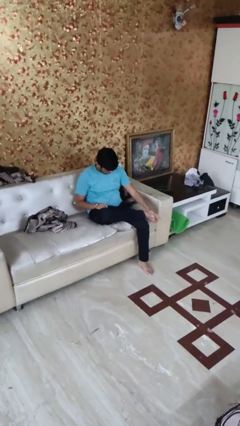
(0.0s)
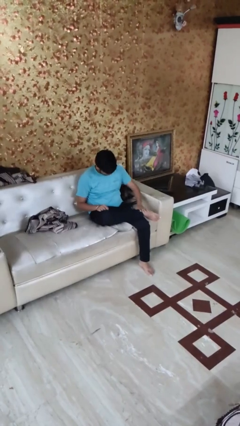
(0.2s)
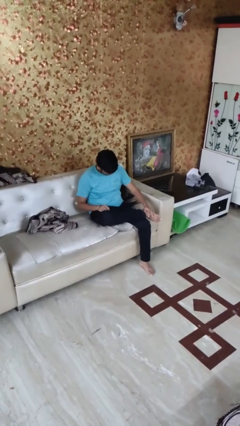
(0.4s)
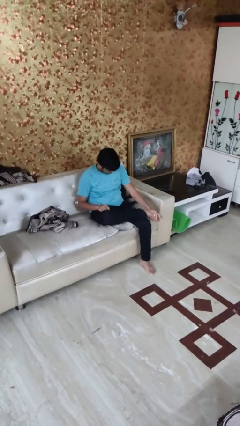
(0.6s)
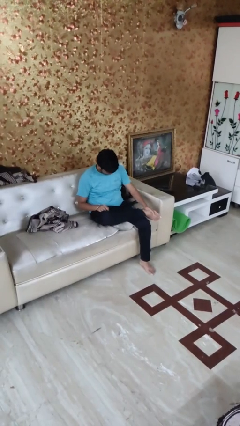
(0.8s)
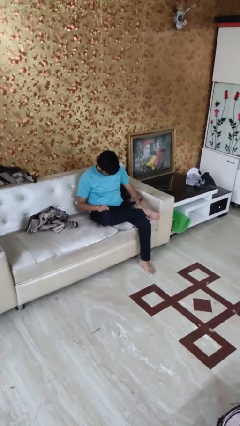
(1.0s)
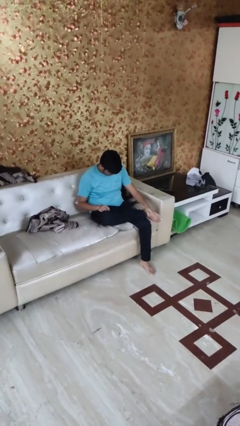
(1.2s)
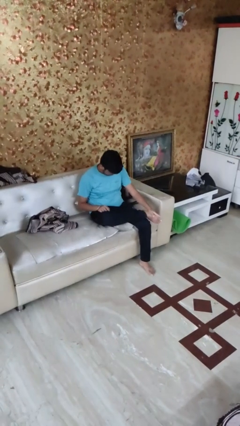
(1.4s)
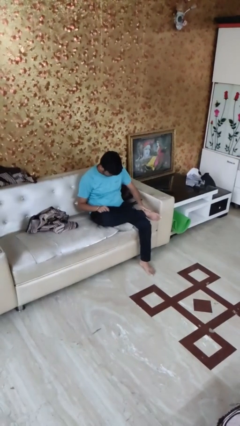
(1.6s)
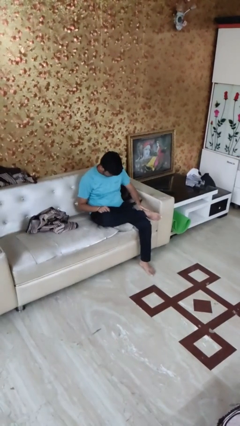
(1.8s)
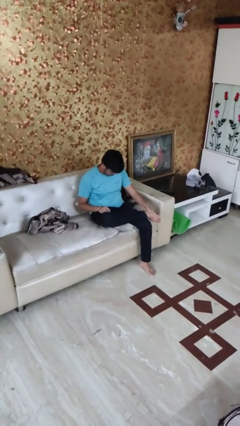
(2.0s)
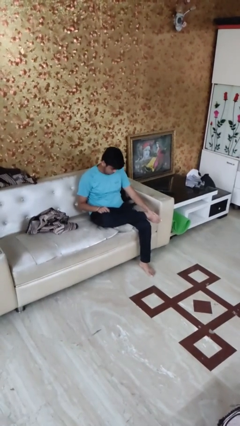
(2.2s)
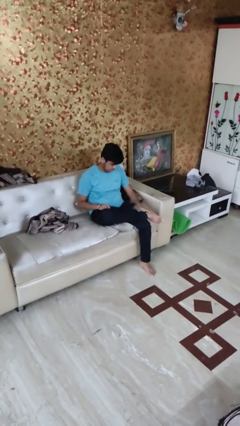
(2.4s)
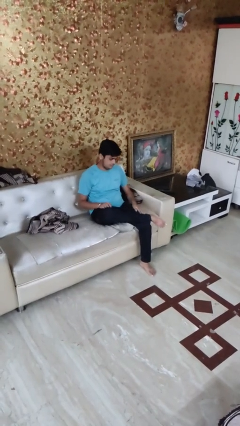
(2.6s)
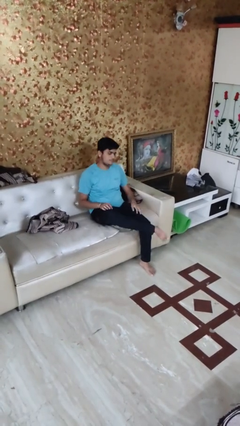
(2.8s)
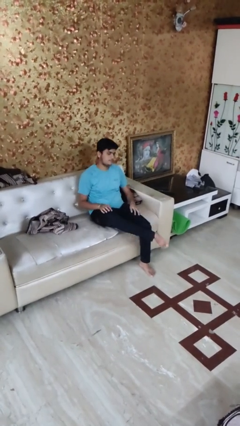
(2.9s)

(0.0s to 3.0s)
person rubs foot

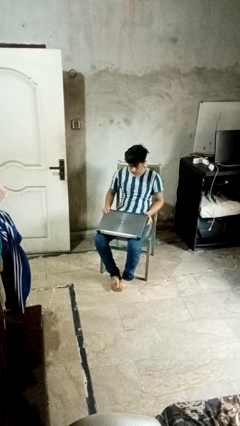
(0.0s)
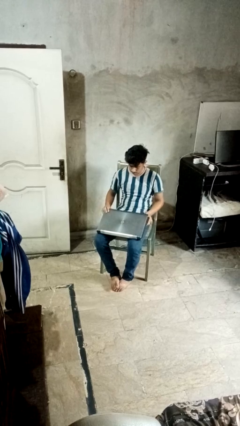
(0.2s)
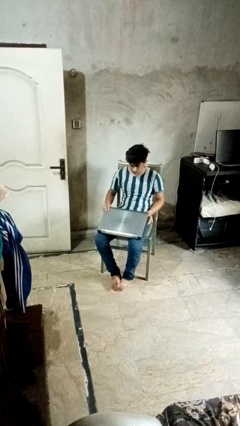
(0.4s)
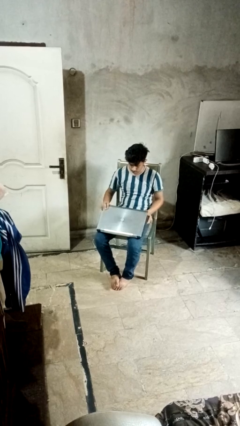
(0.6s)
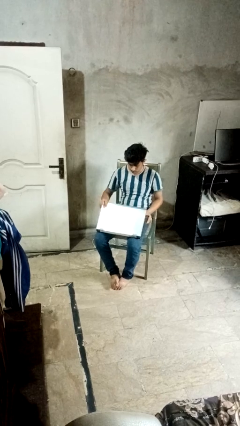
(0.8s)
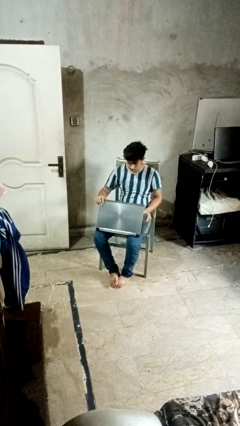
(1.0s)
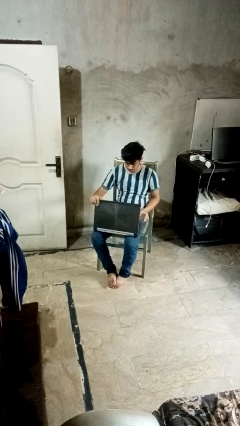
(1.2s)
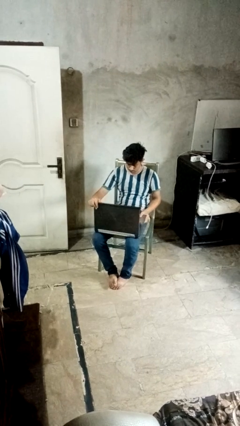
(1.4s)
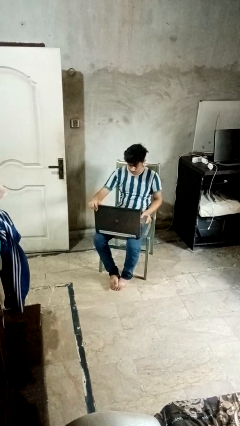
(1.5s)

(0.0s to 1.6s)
person opens laptop

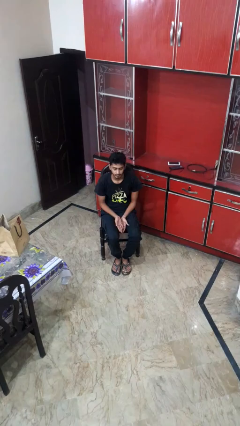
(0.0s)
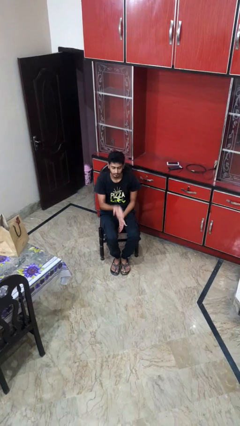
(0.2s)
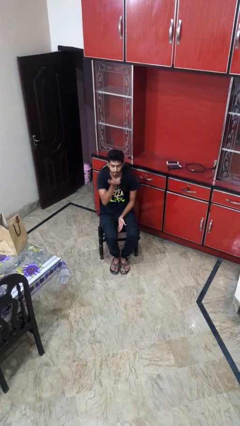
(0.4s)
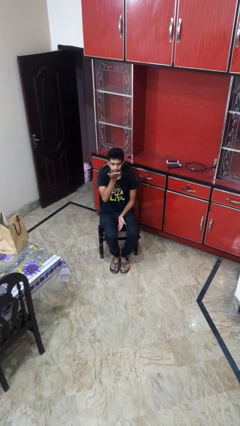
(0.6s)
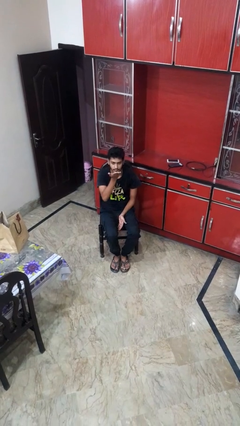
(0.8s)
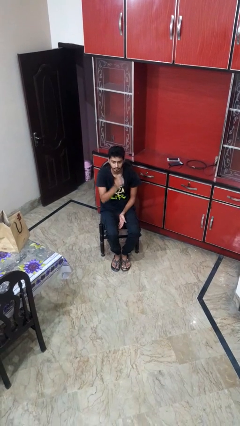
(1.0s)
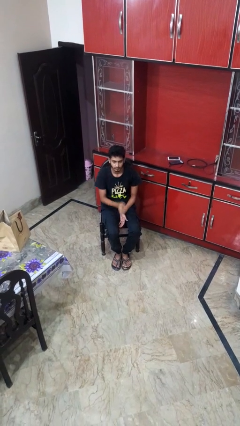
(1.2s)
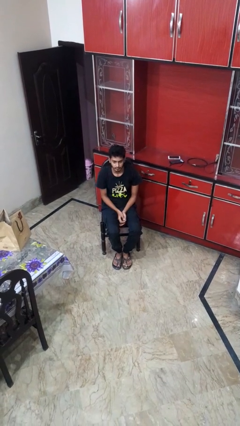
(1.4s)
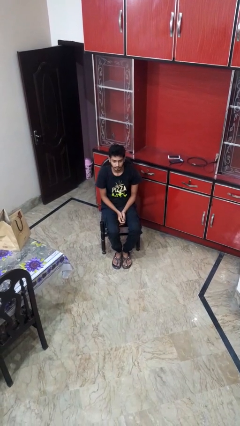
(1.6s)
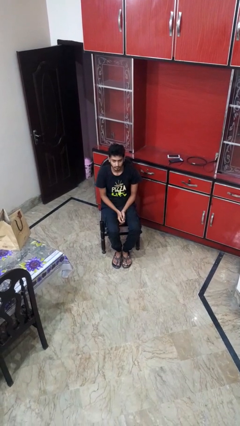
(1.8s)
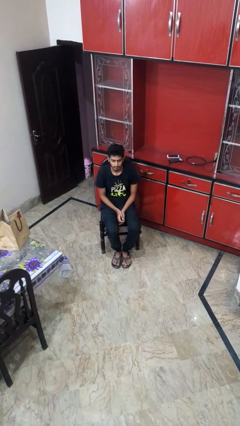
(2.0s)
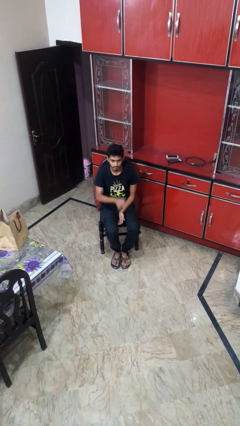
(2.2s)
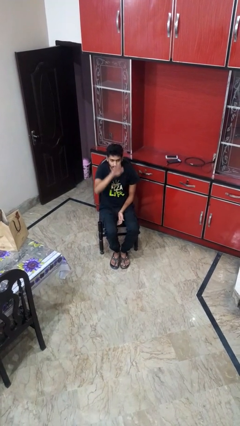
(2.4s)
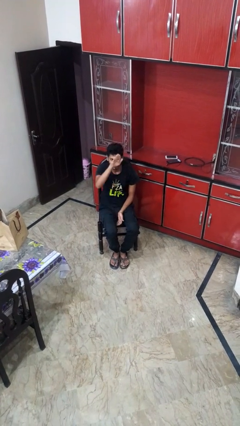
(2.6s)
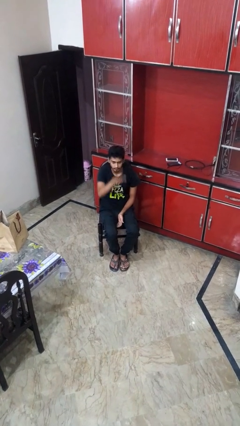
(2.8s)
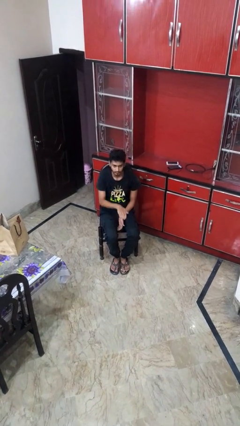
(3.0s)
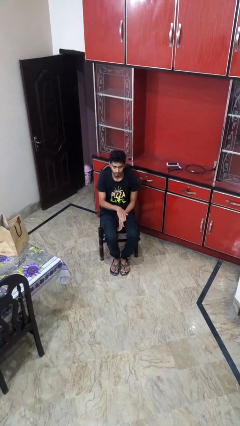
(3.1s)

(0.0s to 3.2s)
person gestures swipe up

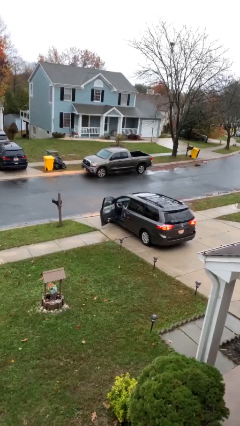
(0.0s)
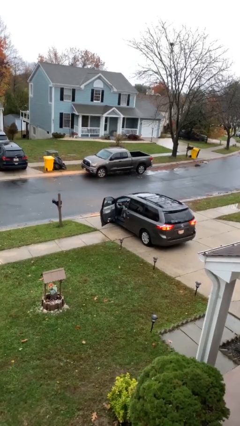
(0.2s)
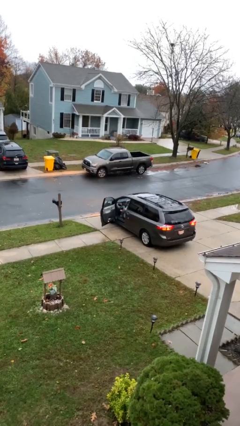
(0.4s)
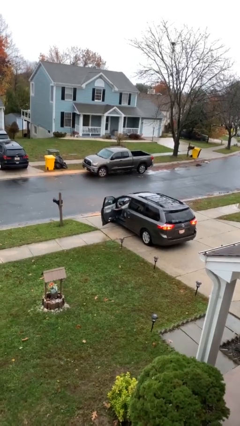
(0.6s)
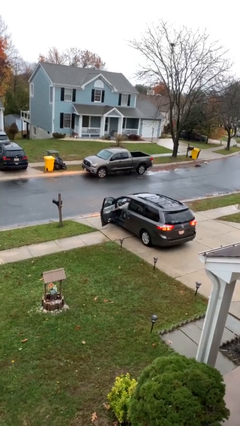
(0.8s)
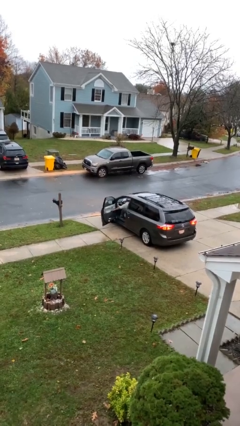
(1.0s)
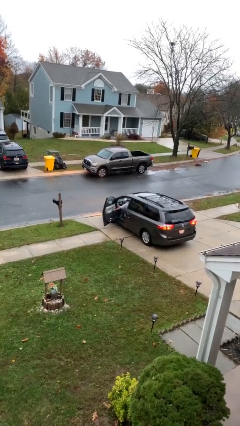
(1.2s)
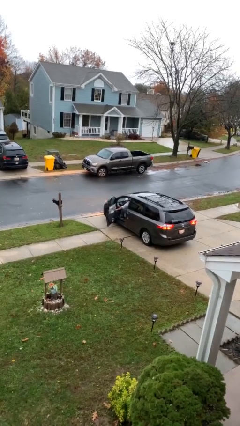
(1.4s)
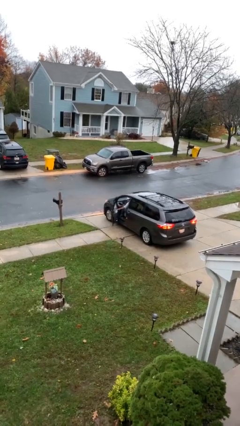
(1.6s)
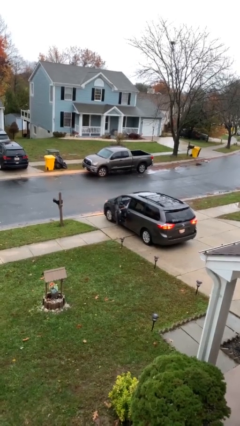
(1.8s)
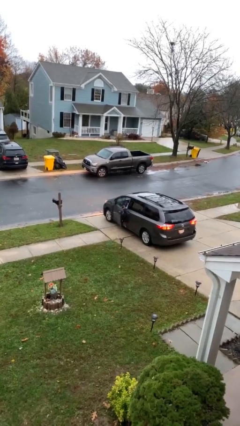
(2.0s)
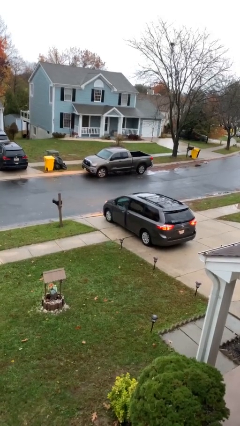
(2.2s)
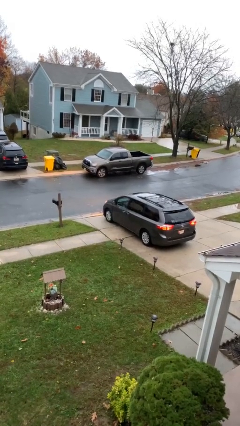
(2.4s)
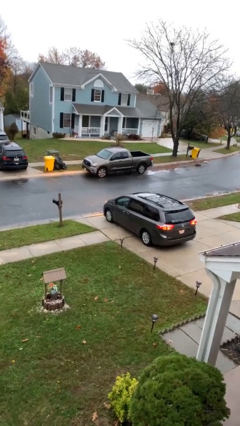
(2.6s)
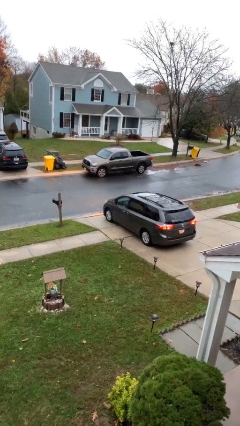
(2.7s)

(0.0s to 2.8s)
person closes car door

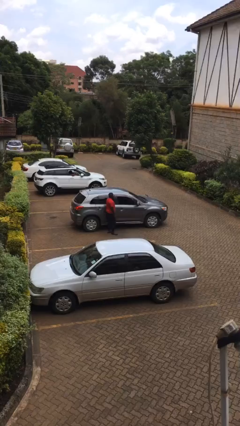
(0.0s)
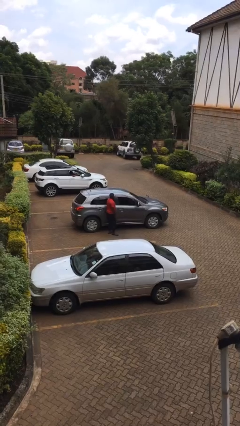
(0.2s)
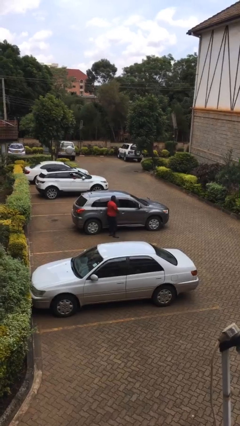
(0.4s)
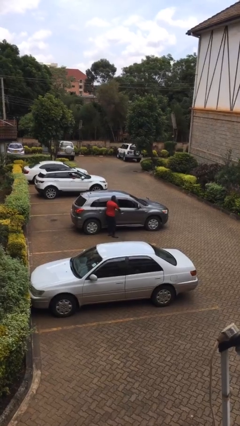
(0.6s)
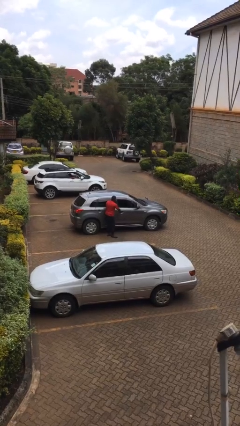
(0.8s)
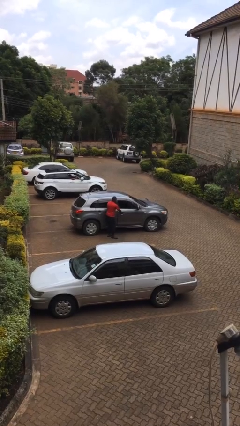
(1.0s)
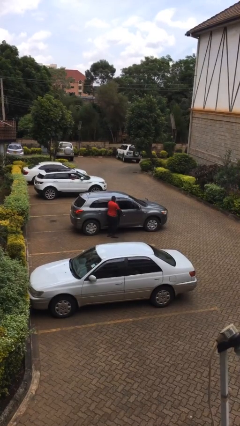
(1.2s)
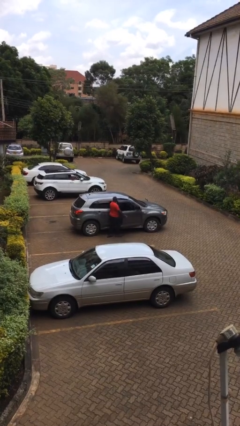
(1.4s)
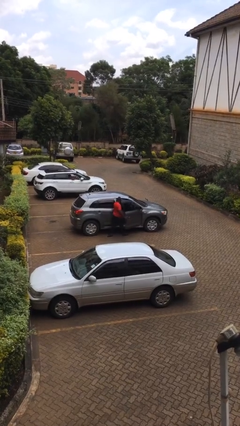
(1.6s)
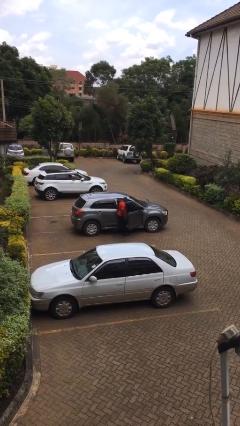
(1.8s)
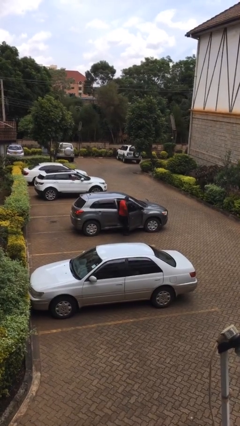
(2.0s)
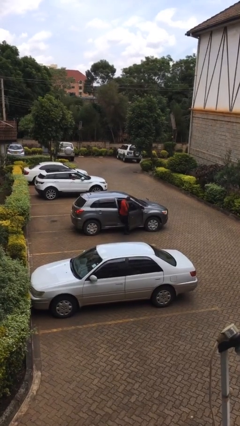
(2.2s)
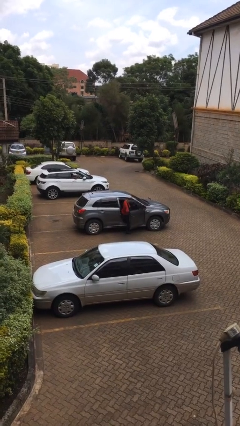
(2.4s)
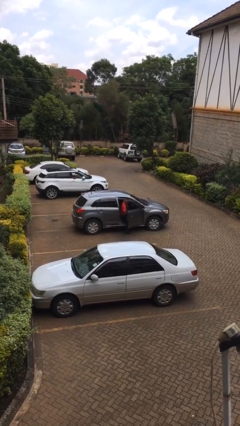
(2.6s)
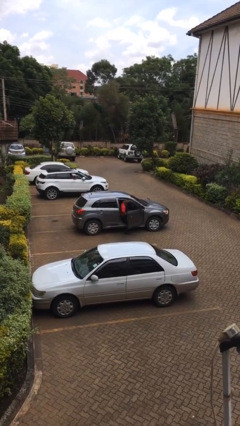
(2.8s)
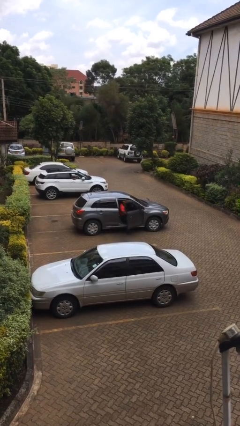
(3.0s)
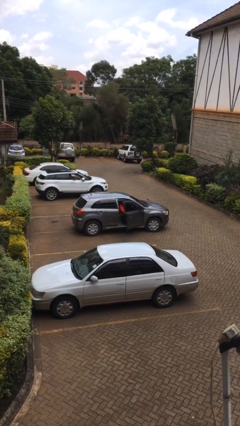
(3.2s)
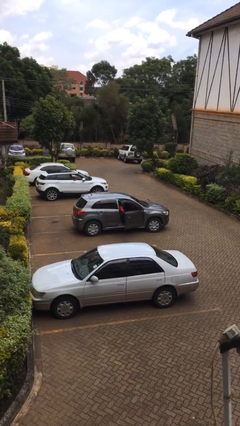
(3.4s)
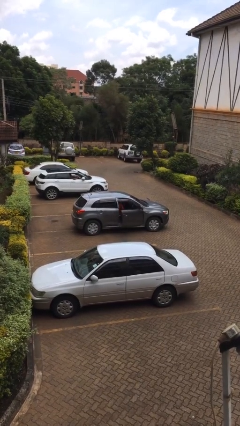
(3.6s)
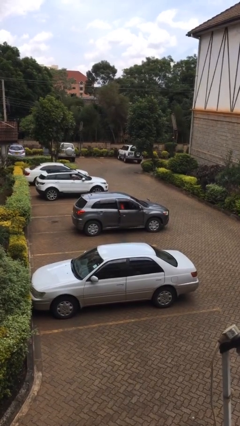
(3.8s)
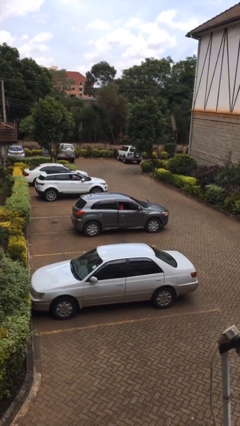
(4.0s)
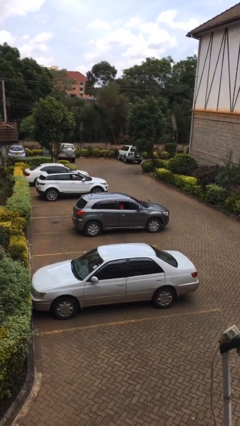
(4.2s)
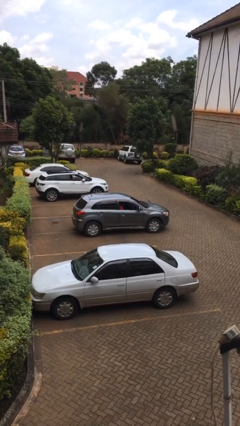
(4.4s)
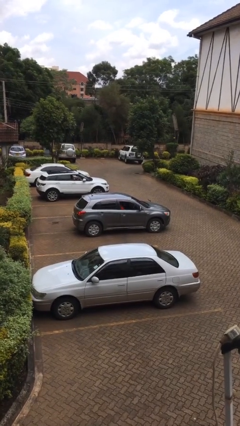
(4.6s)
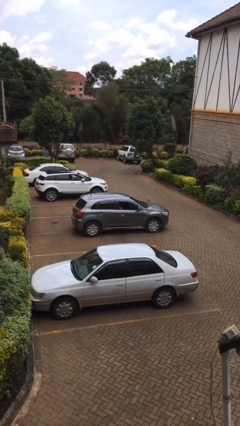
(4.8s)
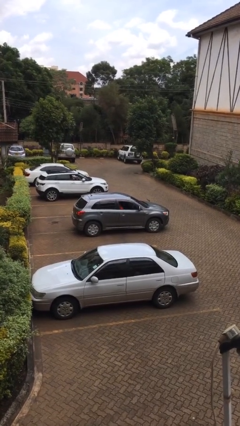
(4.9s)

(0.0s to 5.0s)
car picks up person

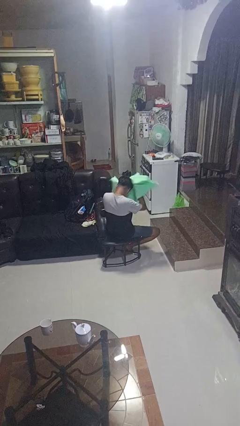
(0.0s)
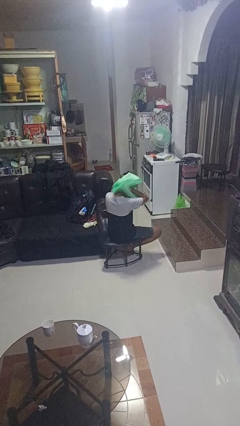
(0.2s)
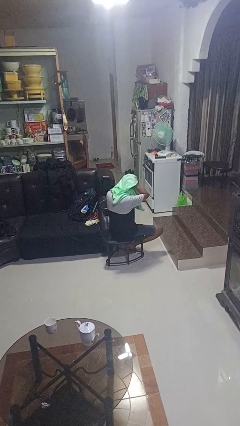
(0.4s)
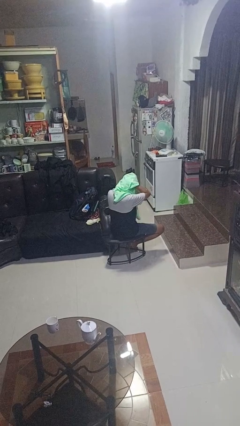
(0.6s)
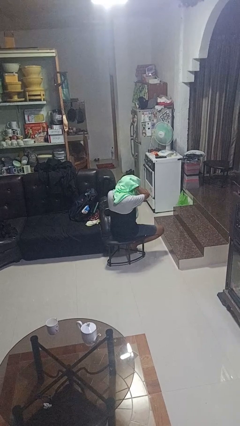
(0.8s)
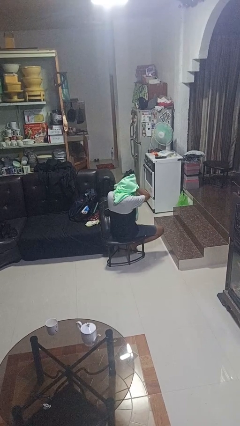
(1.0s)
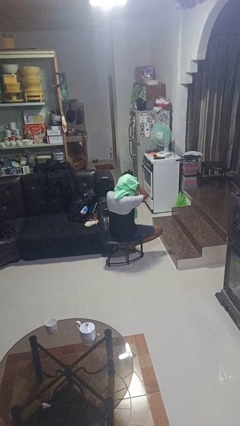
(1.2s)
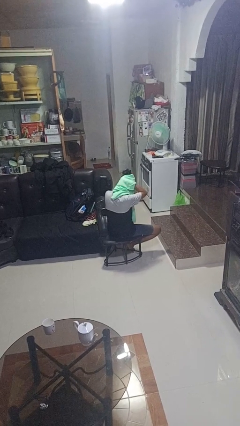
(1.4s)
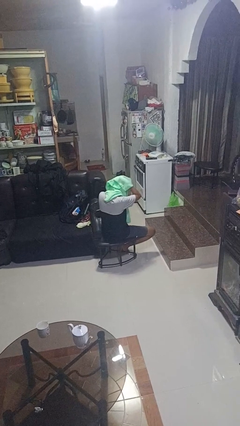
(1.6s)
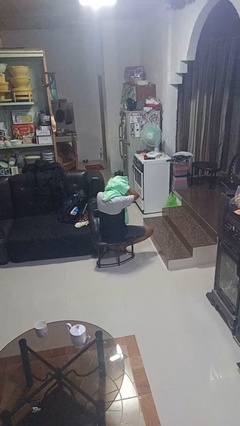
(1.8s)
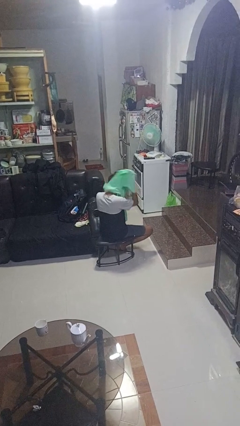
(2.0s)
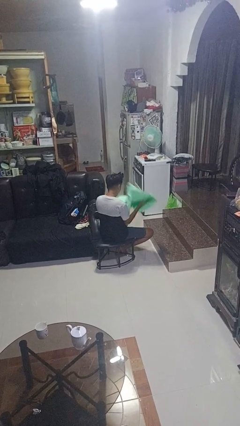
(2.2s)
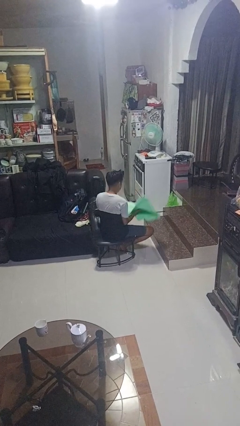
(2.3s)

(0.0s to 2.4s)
person dries hair with towel
